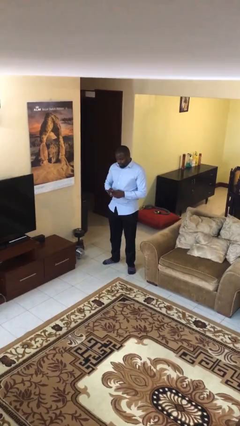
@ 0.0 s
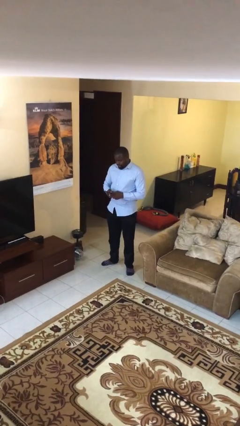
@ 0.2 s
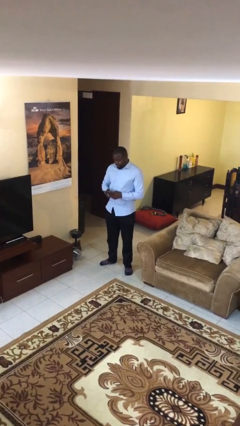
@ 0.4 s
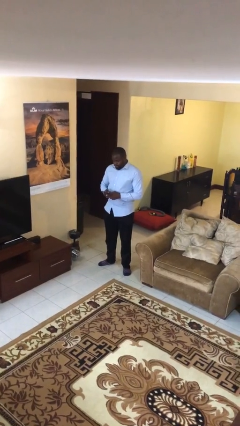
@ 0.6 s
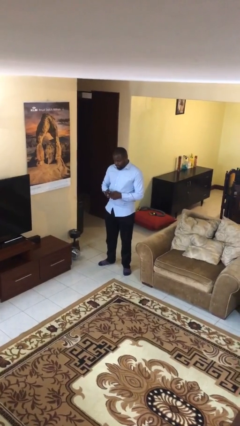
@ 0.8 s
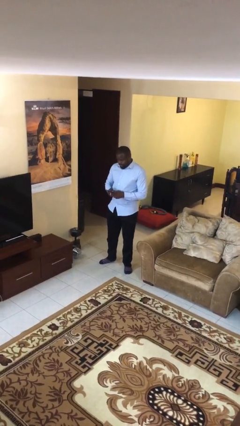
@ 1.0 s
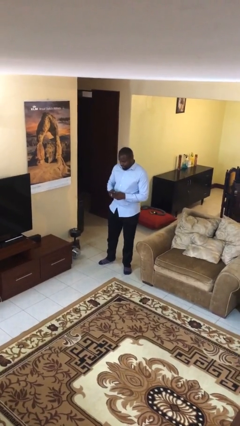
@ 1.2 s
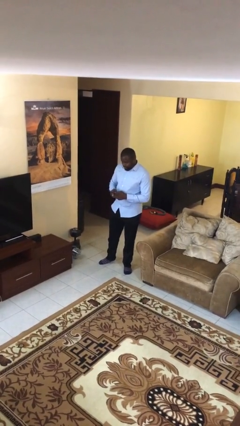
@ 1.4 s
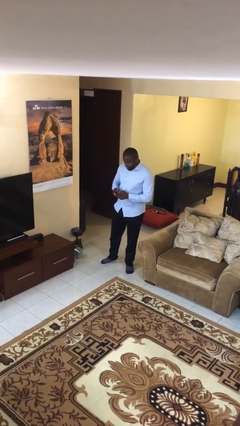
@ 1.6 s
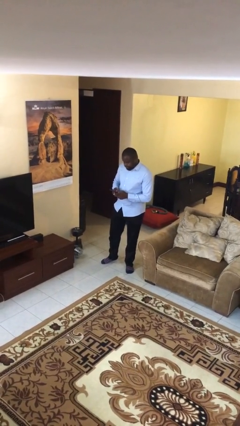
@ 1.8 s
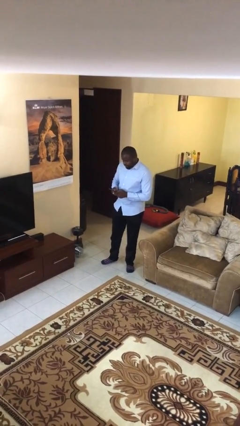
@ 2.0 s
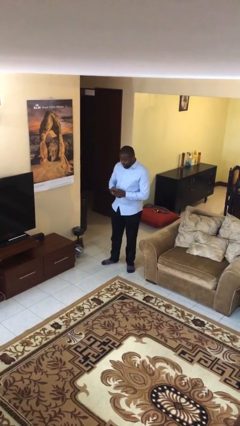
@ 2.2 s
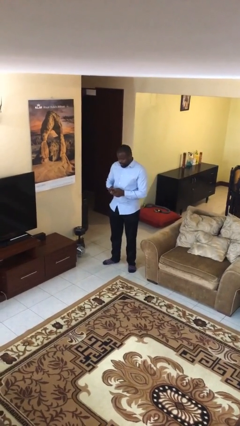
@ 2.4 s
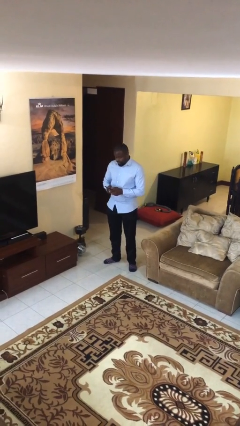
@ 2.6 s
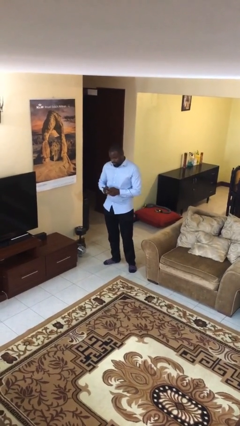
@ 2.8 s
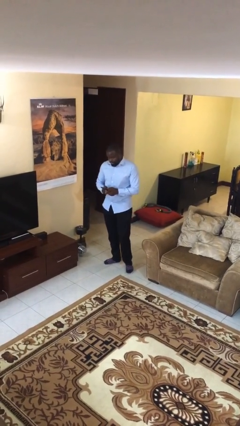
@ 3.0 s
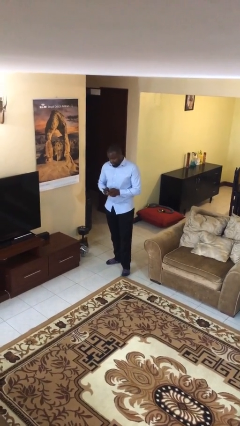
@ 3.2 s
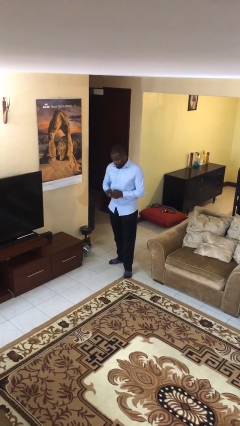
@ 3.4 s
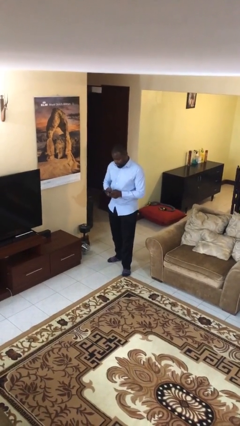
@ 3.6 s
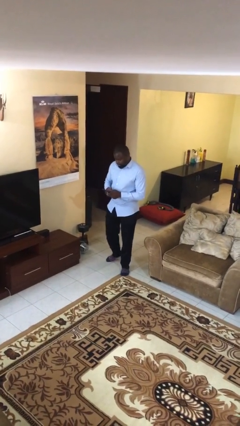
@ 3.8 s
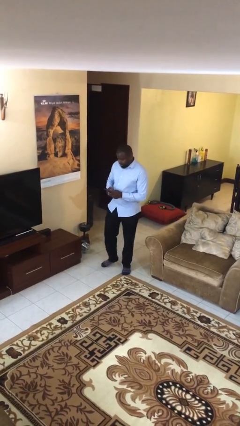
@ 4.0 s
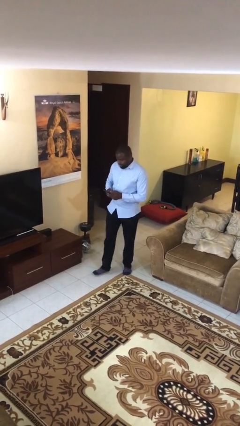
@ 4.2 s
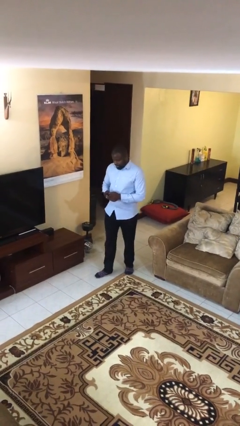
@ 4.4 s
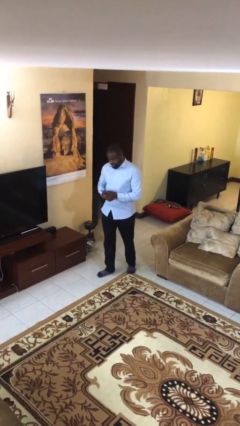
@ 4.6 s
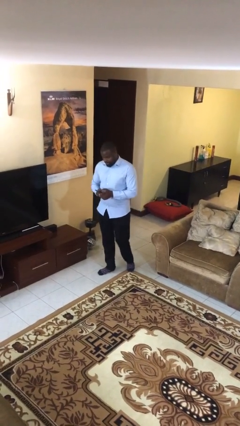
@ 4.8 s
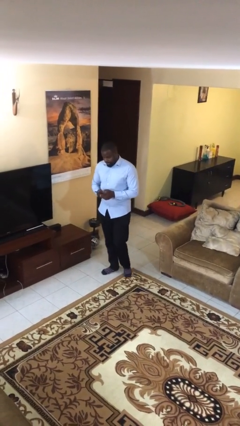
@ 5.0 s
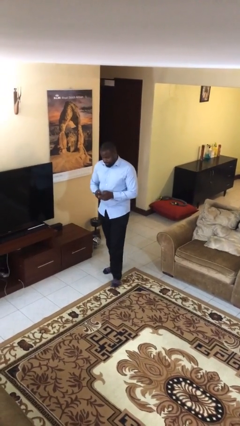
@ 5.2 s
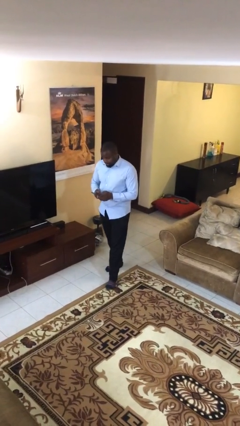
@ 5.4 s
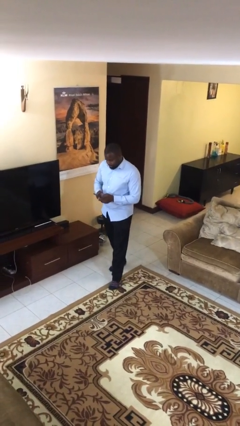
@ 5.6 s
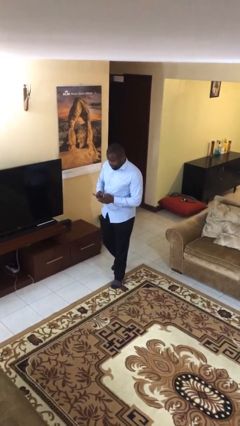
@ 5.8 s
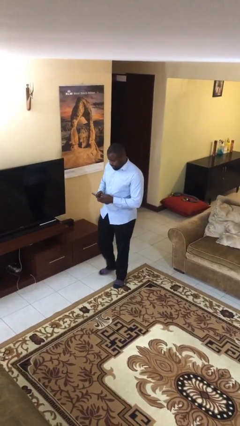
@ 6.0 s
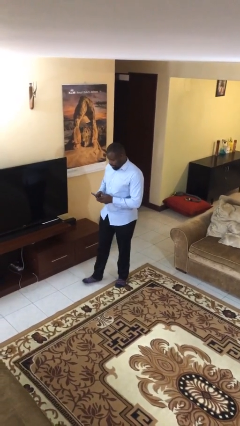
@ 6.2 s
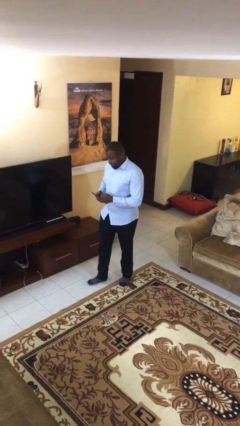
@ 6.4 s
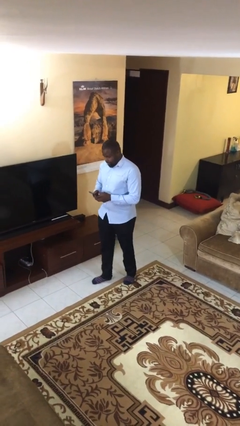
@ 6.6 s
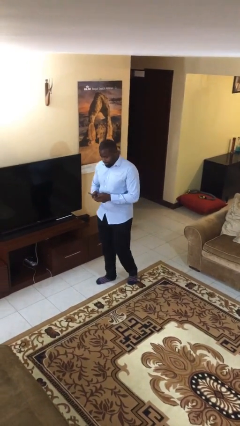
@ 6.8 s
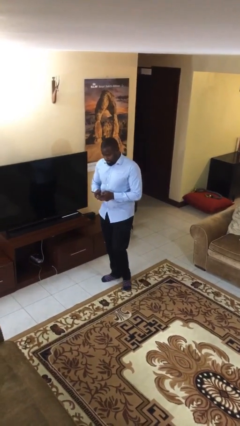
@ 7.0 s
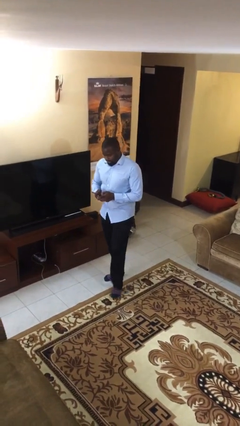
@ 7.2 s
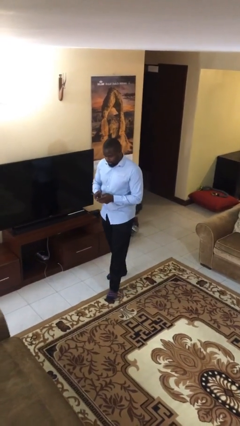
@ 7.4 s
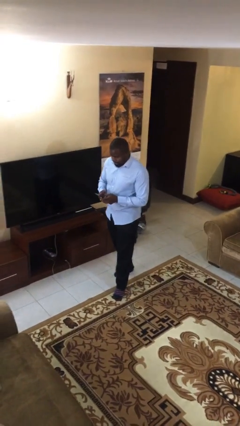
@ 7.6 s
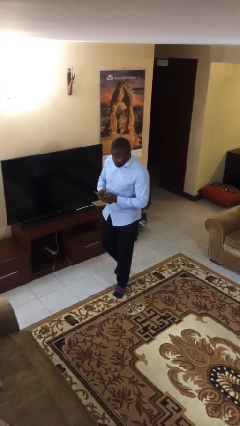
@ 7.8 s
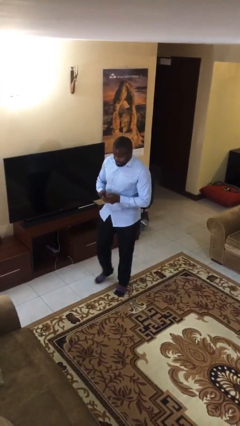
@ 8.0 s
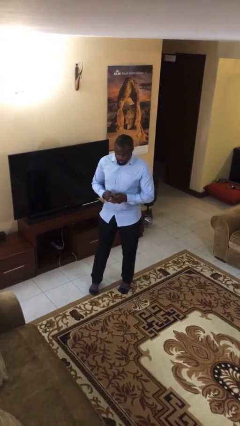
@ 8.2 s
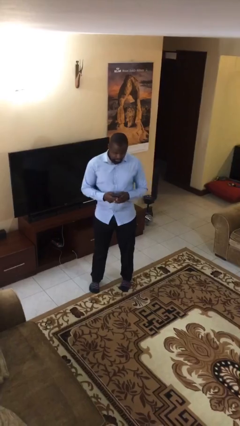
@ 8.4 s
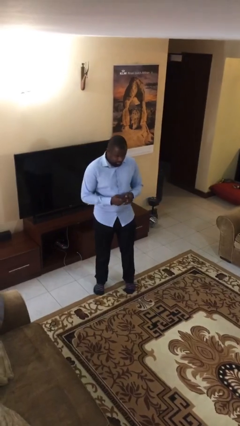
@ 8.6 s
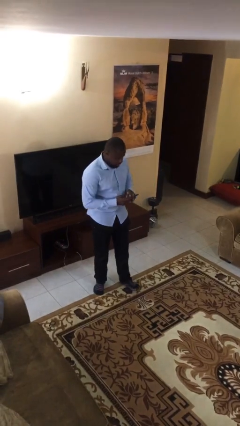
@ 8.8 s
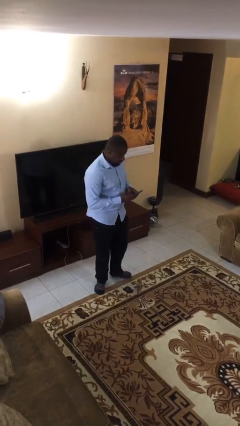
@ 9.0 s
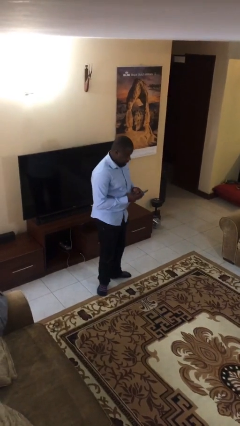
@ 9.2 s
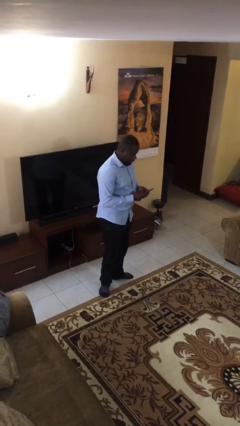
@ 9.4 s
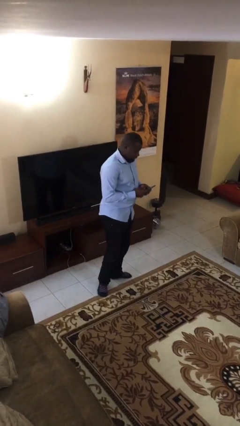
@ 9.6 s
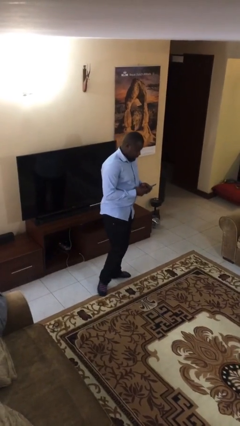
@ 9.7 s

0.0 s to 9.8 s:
person texts on phone

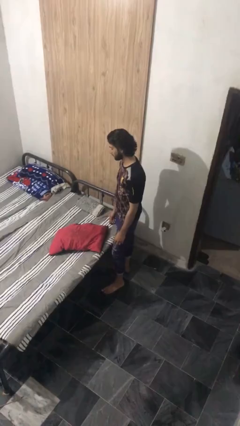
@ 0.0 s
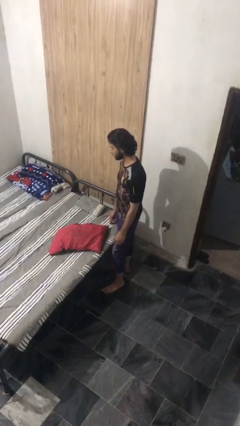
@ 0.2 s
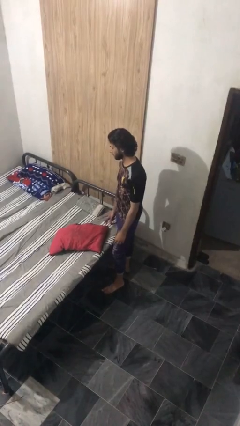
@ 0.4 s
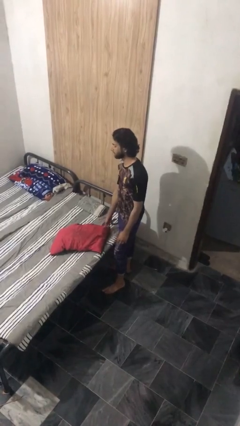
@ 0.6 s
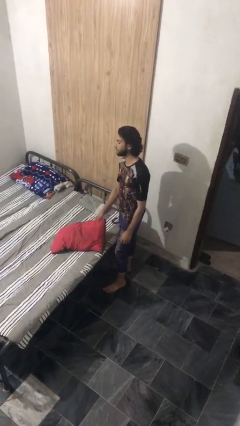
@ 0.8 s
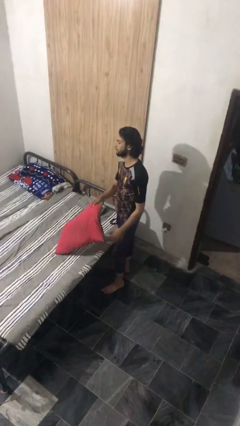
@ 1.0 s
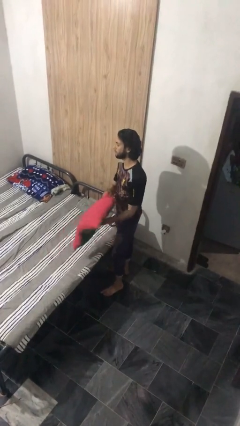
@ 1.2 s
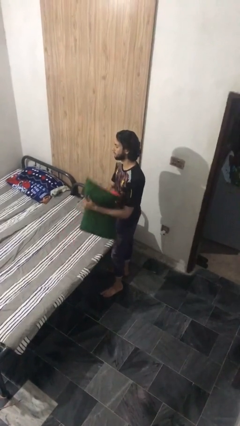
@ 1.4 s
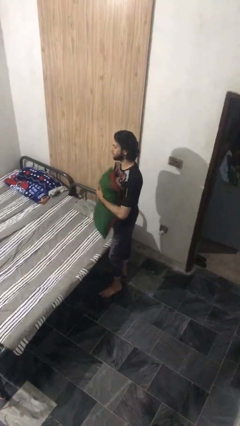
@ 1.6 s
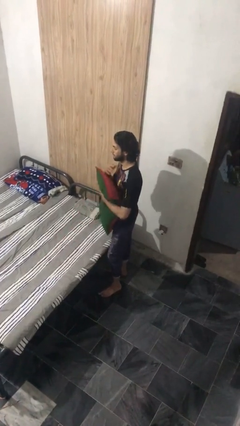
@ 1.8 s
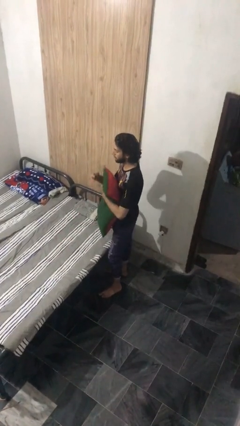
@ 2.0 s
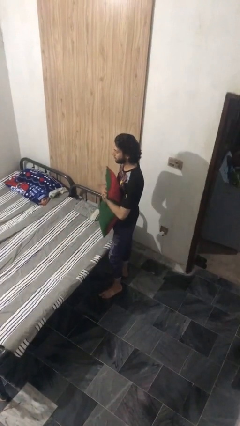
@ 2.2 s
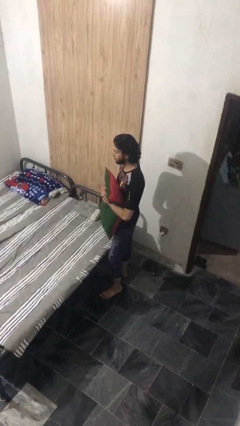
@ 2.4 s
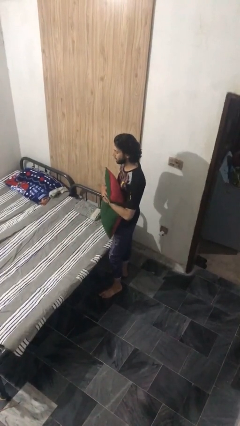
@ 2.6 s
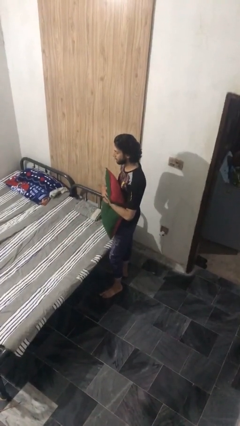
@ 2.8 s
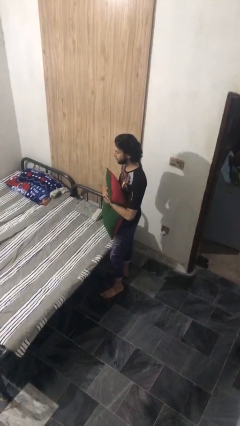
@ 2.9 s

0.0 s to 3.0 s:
person picks up object from bed

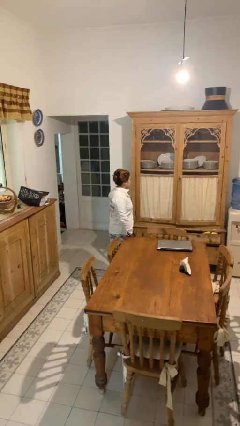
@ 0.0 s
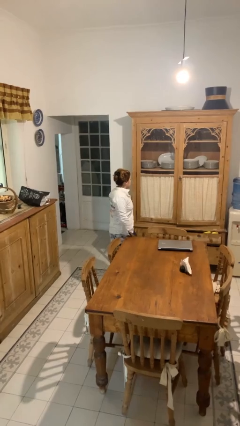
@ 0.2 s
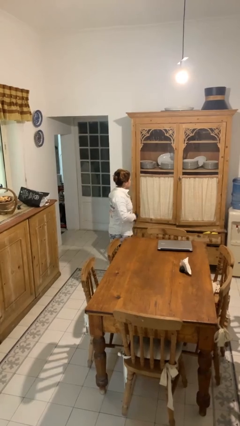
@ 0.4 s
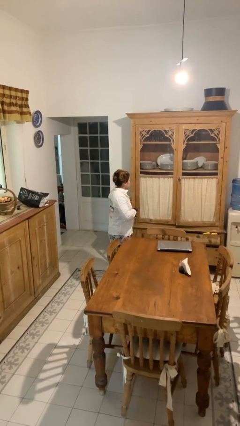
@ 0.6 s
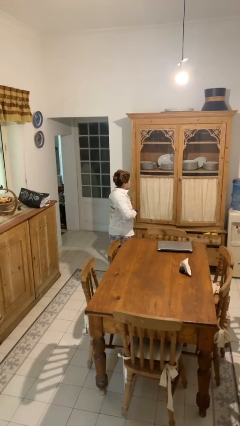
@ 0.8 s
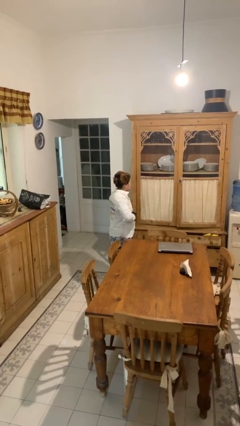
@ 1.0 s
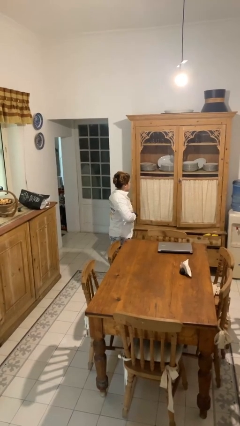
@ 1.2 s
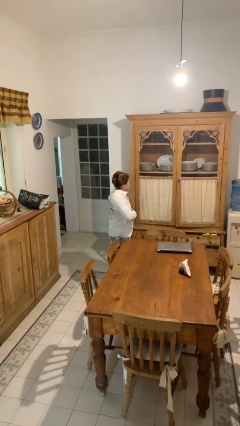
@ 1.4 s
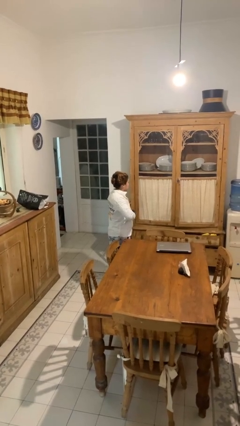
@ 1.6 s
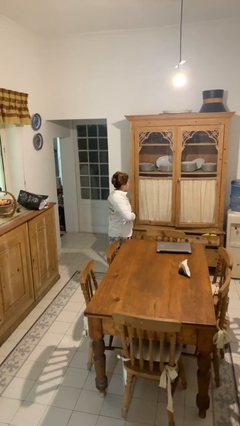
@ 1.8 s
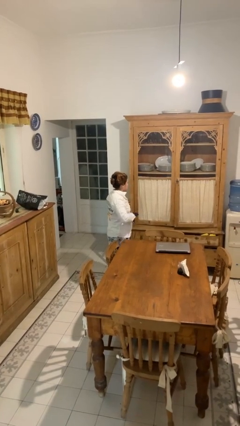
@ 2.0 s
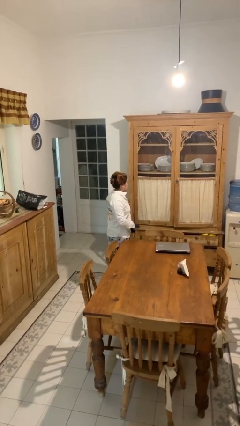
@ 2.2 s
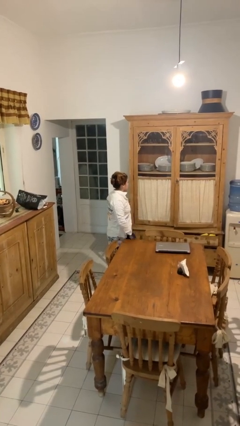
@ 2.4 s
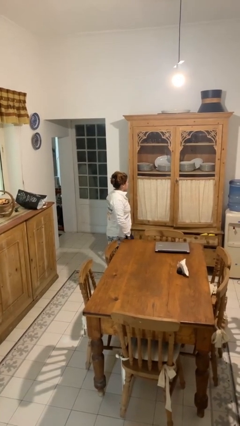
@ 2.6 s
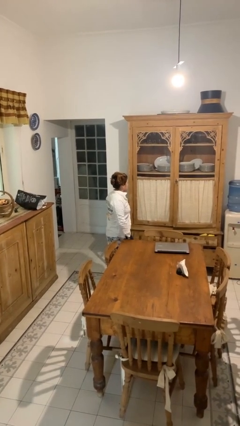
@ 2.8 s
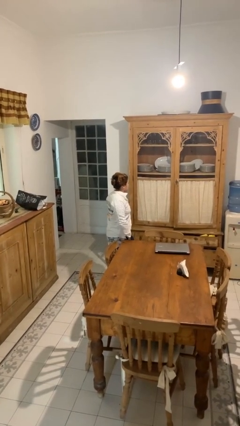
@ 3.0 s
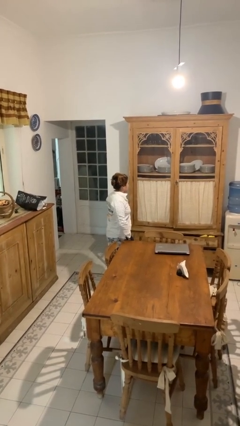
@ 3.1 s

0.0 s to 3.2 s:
person unbuttons shirt

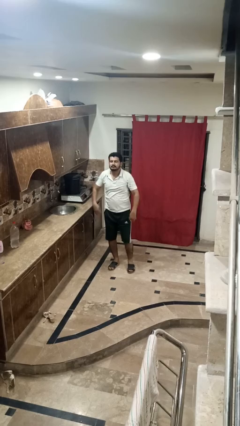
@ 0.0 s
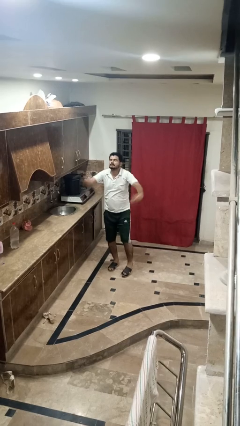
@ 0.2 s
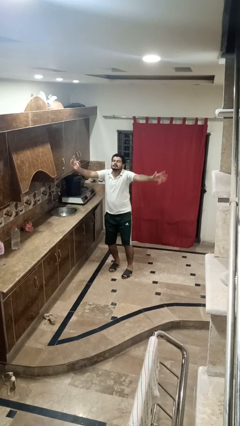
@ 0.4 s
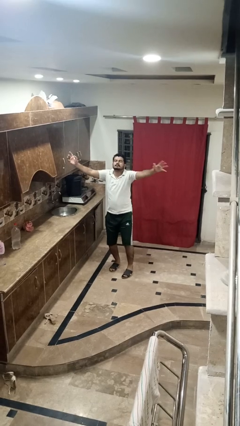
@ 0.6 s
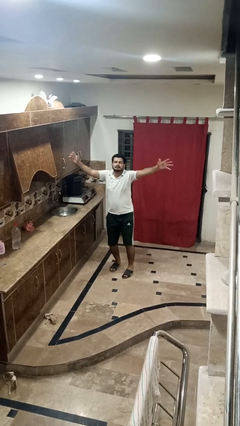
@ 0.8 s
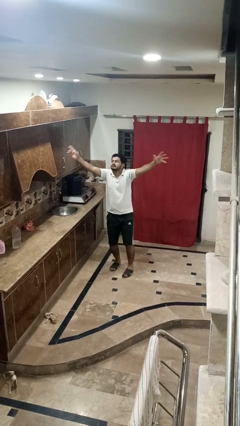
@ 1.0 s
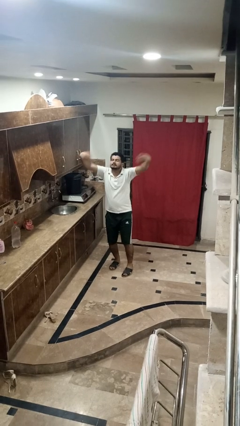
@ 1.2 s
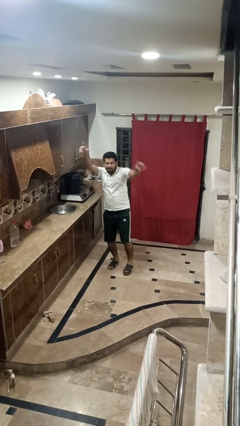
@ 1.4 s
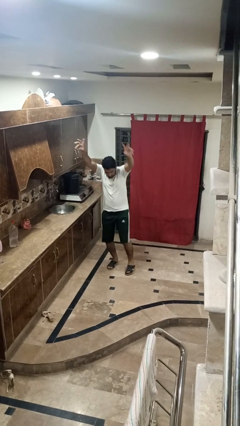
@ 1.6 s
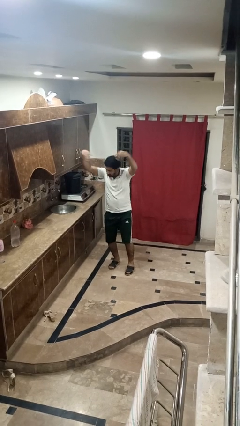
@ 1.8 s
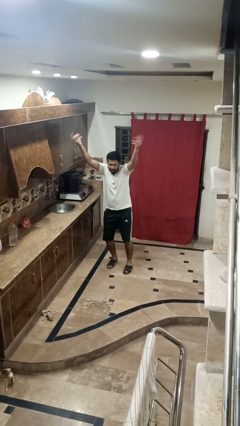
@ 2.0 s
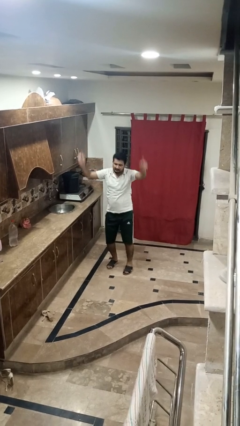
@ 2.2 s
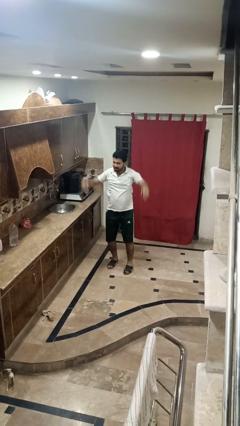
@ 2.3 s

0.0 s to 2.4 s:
person dances in place
